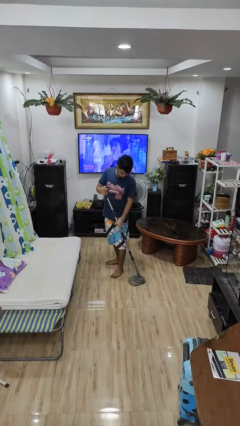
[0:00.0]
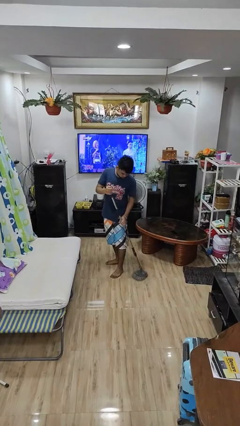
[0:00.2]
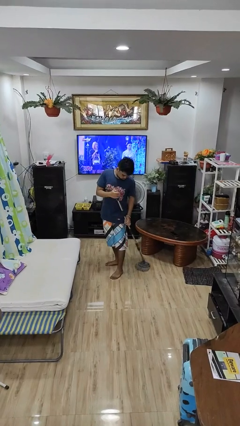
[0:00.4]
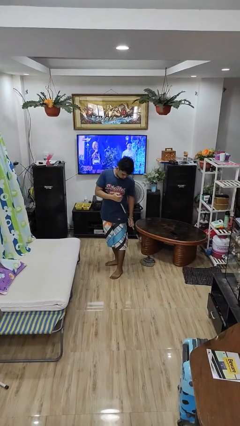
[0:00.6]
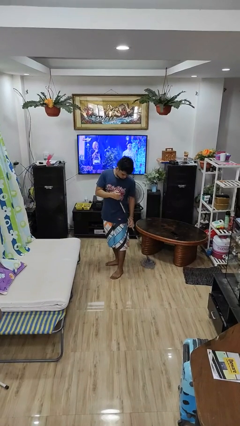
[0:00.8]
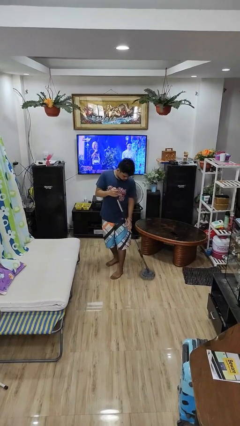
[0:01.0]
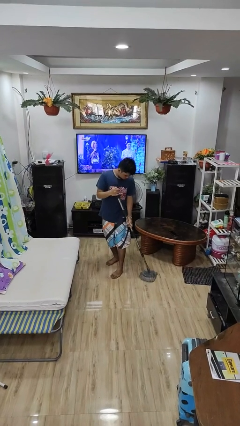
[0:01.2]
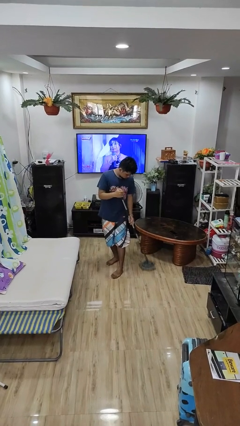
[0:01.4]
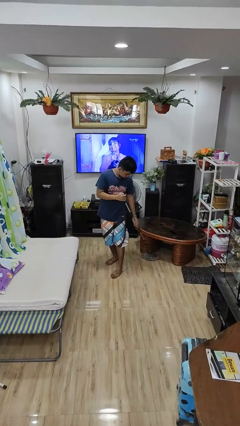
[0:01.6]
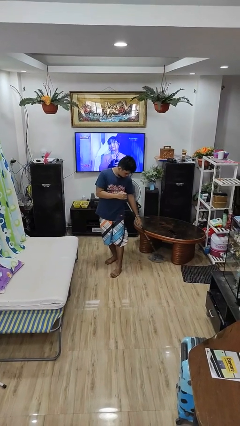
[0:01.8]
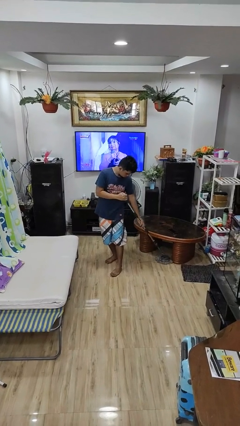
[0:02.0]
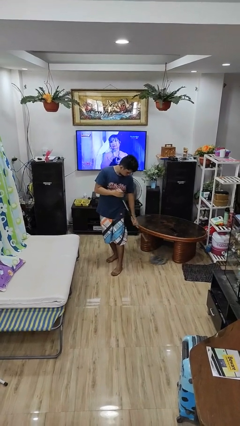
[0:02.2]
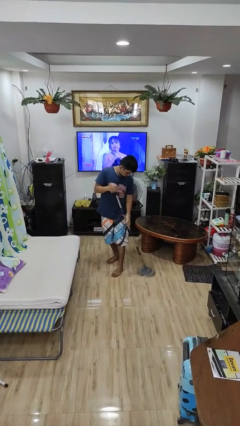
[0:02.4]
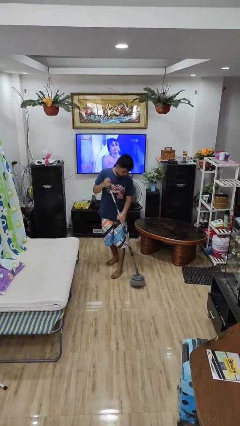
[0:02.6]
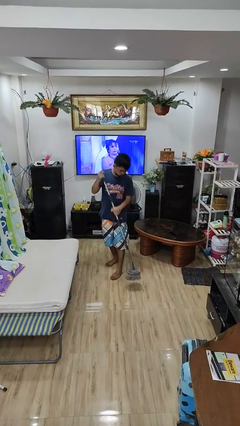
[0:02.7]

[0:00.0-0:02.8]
person mops

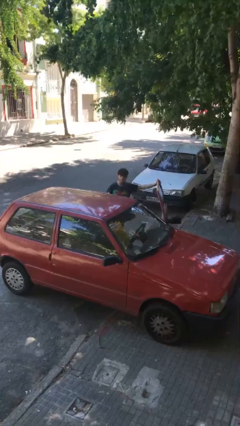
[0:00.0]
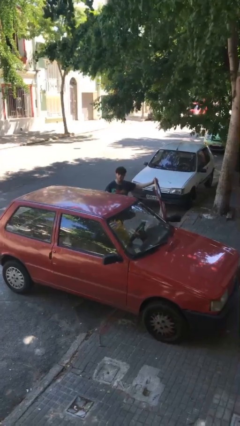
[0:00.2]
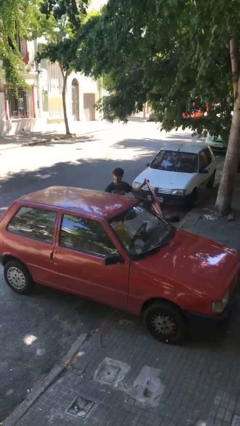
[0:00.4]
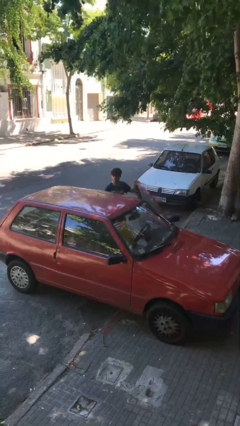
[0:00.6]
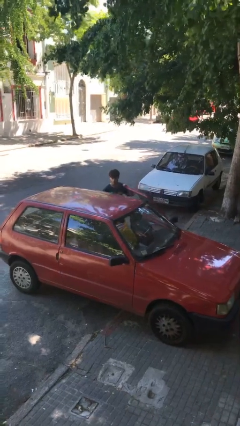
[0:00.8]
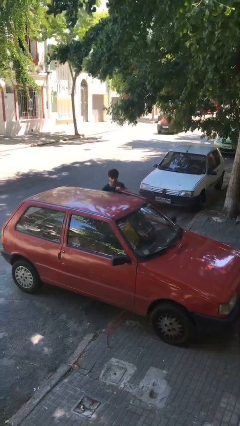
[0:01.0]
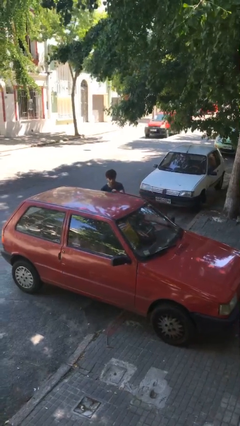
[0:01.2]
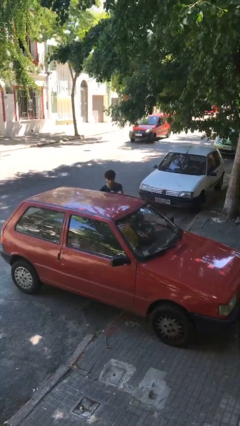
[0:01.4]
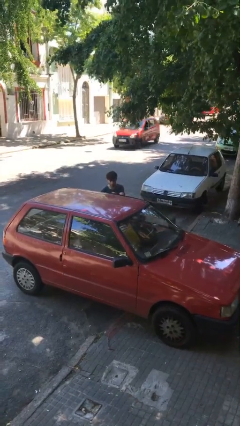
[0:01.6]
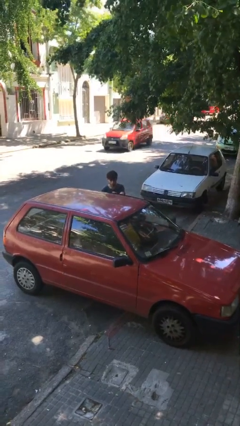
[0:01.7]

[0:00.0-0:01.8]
person closes car door

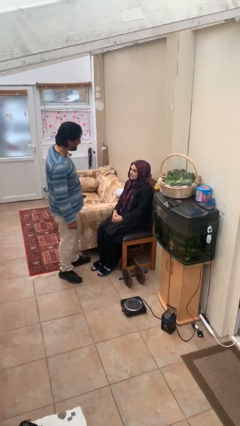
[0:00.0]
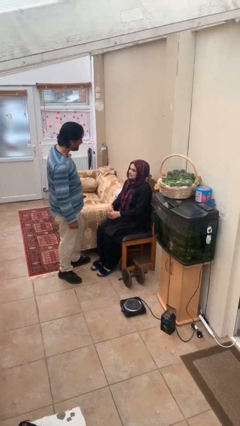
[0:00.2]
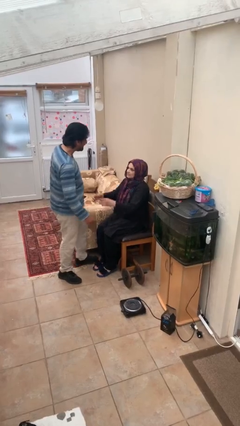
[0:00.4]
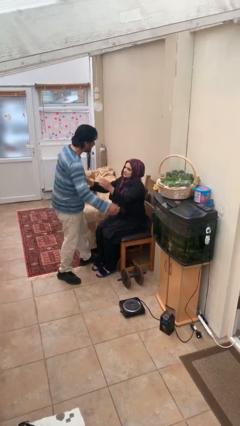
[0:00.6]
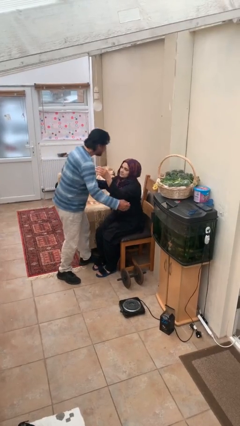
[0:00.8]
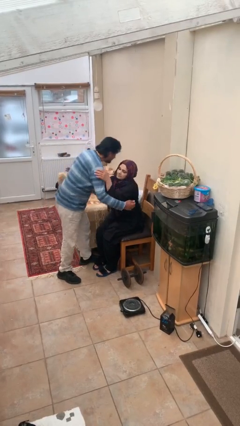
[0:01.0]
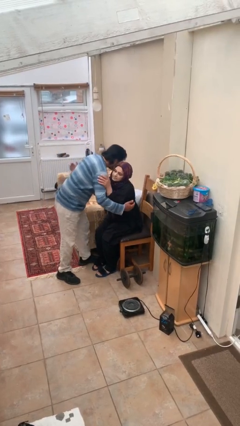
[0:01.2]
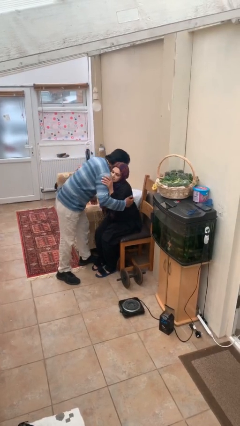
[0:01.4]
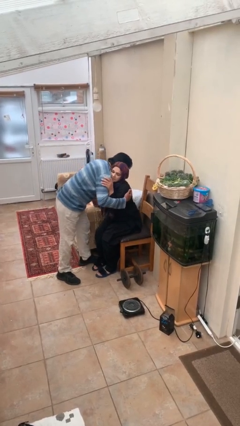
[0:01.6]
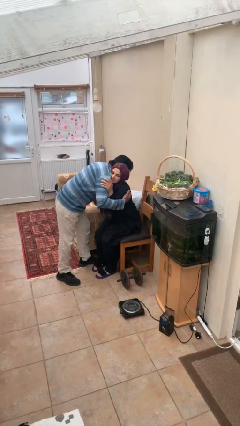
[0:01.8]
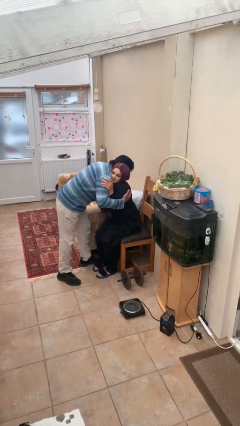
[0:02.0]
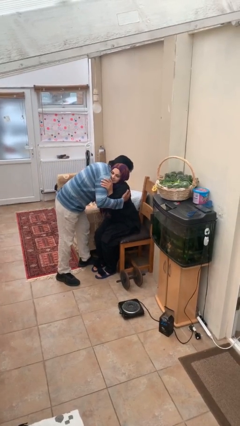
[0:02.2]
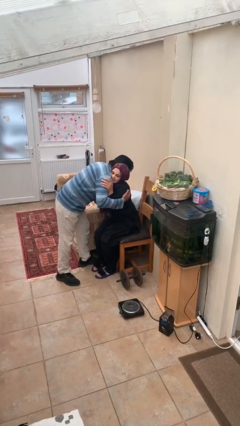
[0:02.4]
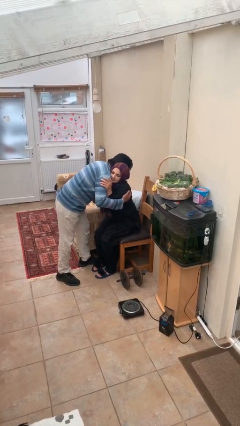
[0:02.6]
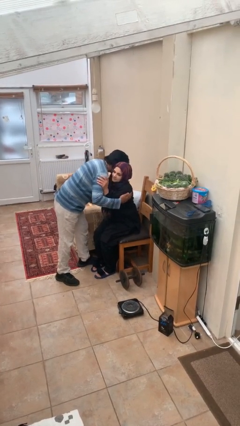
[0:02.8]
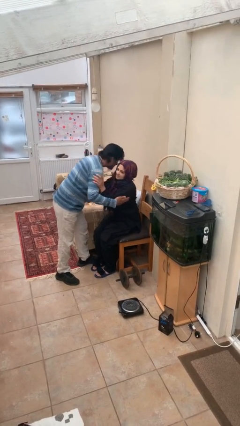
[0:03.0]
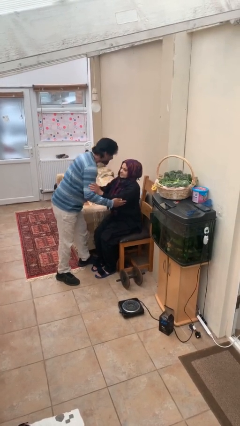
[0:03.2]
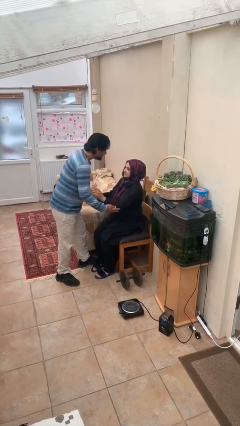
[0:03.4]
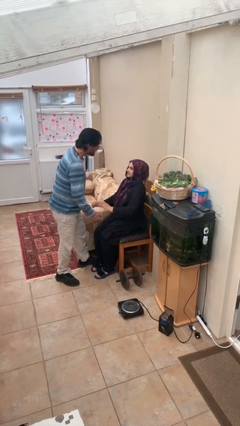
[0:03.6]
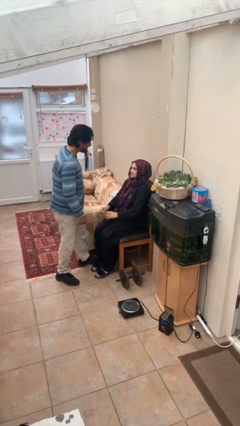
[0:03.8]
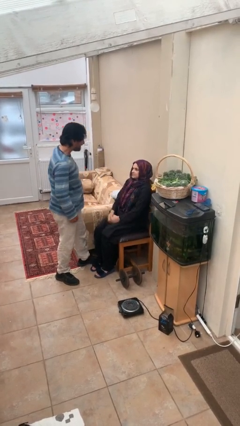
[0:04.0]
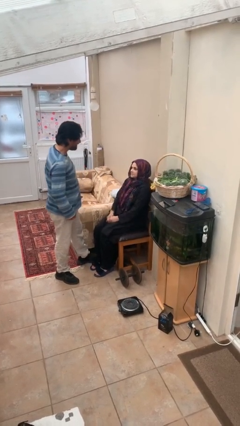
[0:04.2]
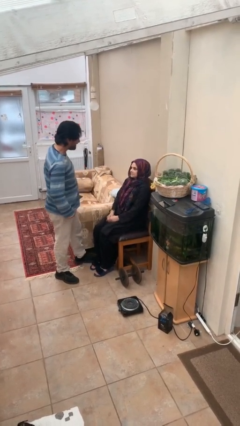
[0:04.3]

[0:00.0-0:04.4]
person embraces person

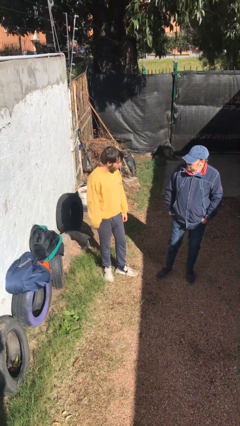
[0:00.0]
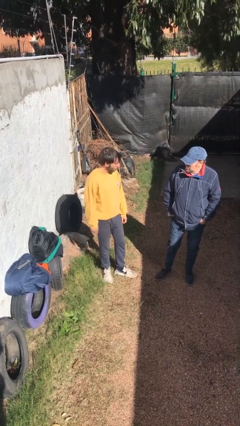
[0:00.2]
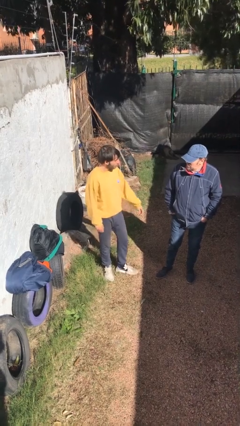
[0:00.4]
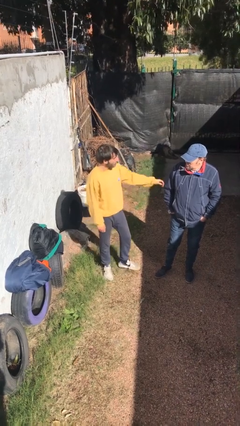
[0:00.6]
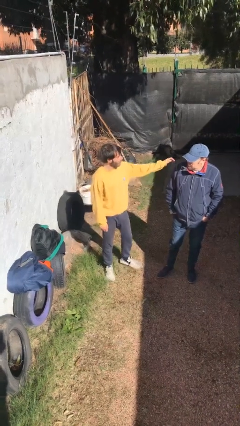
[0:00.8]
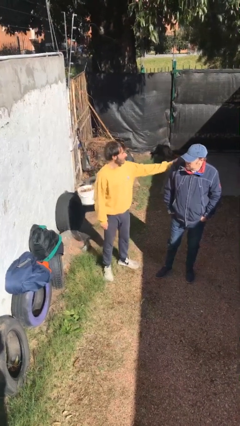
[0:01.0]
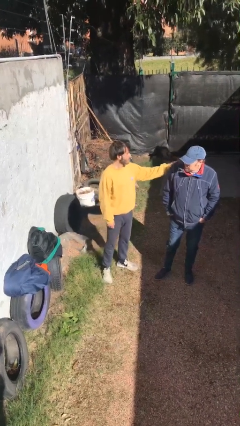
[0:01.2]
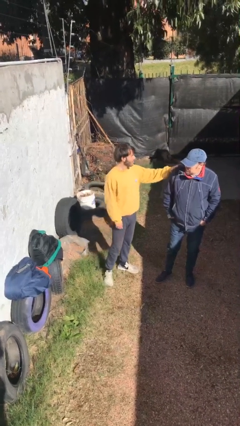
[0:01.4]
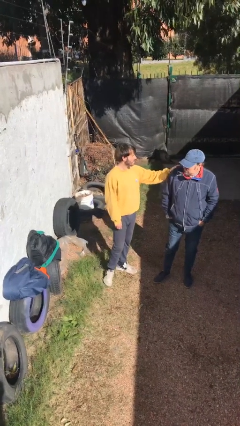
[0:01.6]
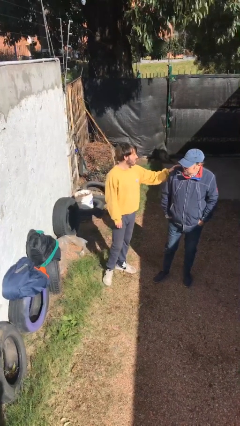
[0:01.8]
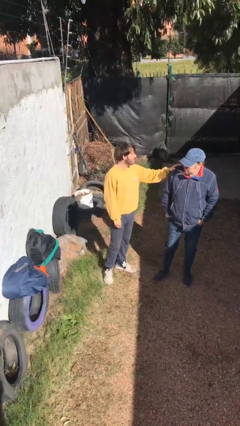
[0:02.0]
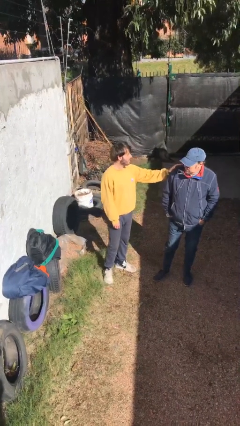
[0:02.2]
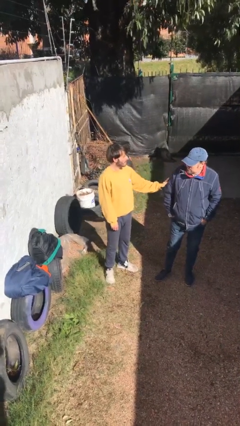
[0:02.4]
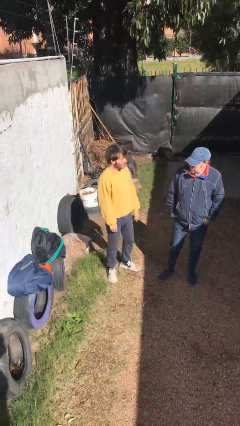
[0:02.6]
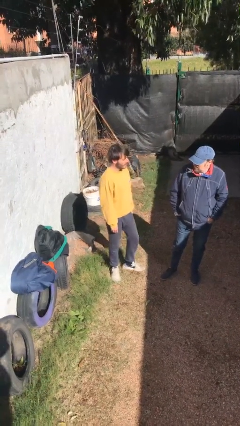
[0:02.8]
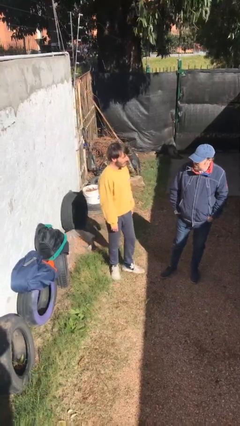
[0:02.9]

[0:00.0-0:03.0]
person pounds shoulders of person

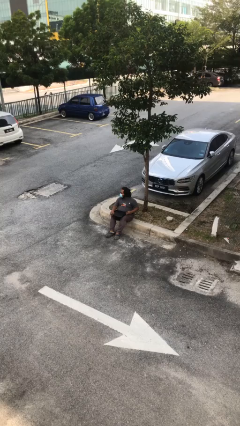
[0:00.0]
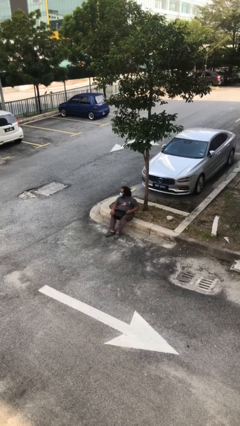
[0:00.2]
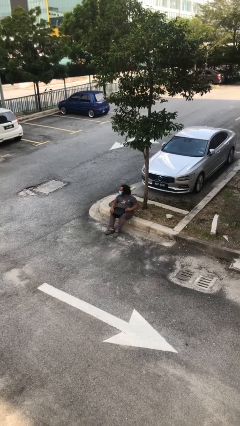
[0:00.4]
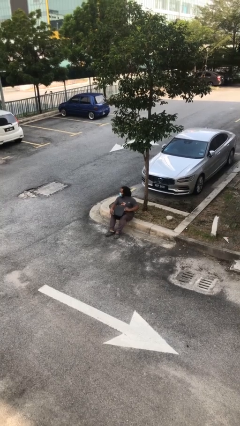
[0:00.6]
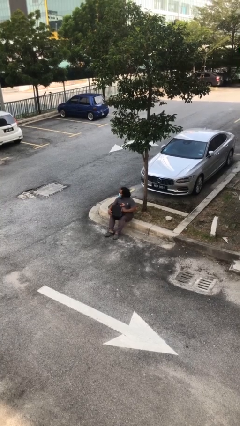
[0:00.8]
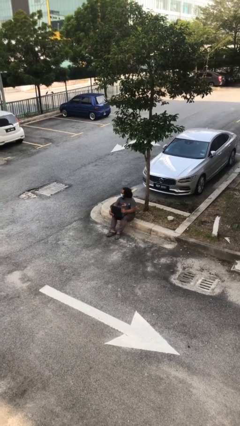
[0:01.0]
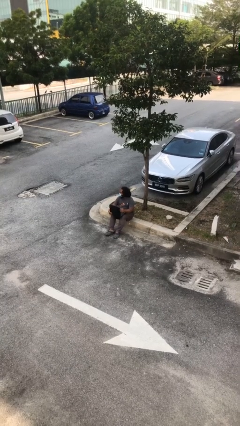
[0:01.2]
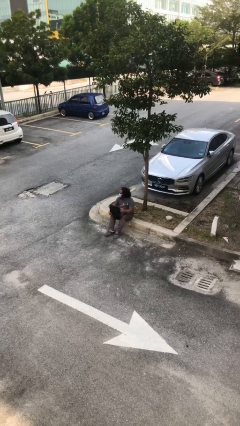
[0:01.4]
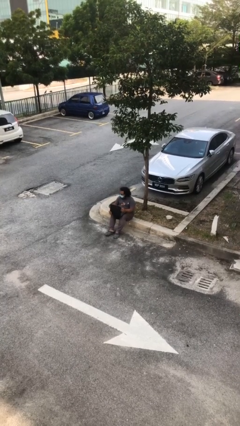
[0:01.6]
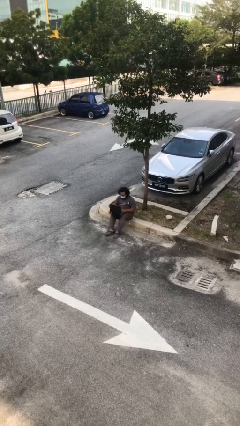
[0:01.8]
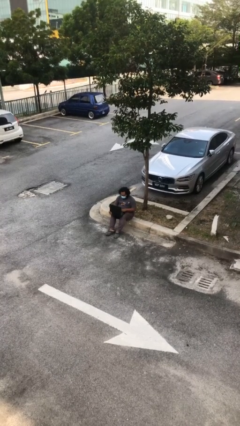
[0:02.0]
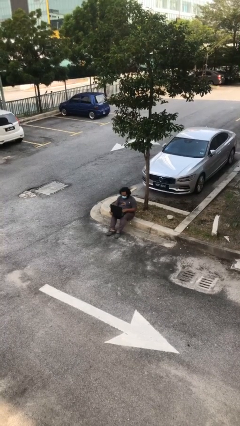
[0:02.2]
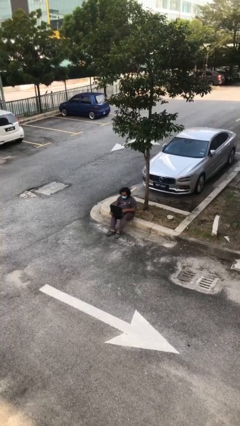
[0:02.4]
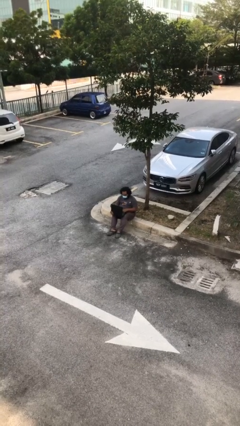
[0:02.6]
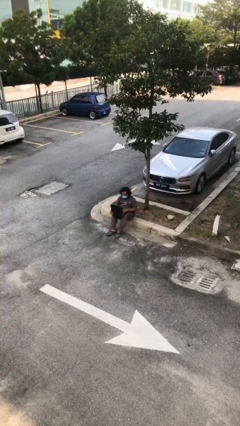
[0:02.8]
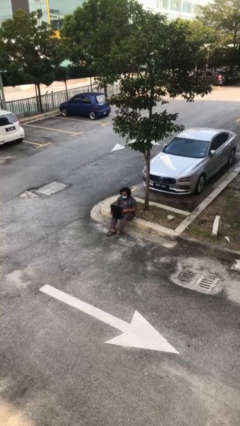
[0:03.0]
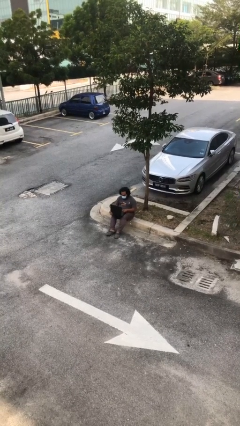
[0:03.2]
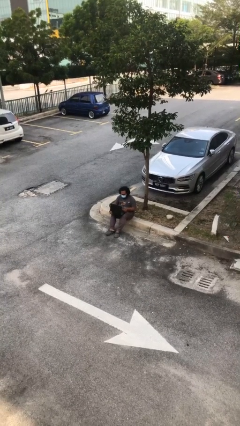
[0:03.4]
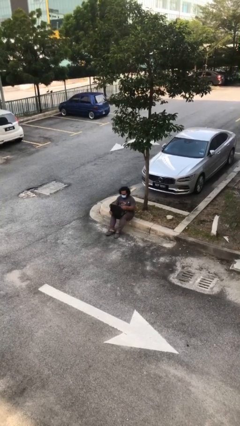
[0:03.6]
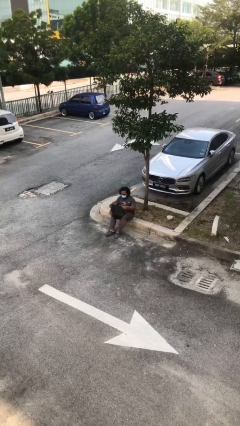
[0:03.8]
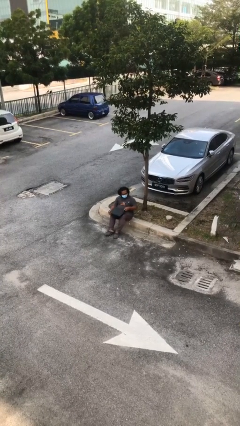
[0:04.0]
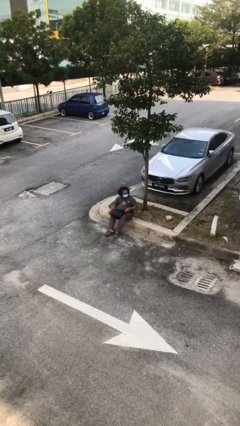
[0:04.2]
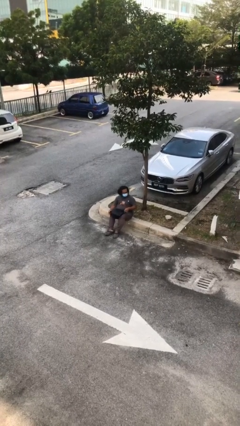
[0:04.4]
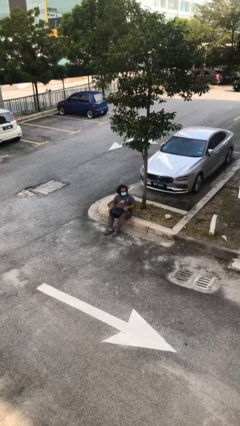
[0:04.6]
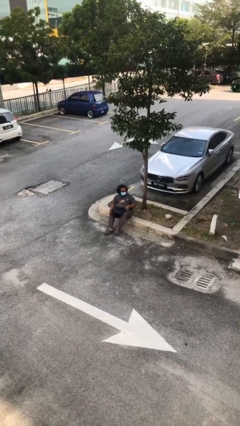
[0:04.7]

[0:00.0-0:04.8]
person interacts with laptop

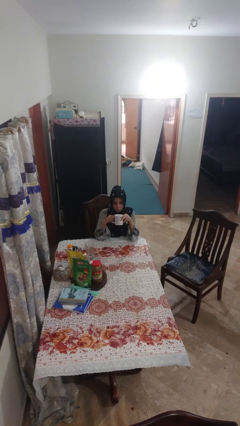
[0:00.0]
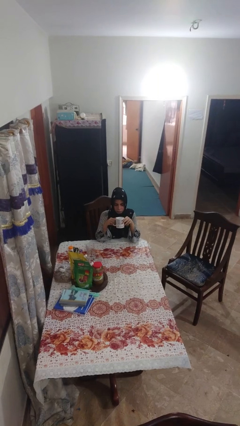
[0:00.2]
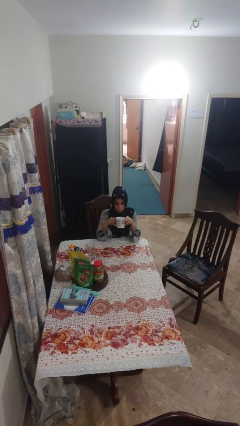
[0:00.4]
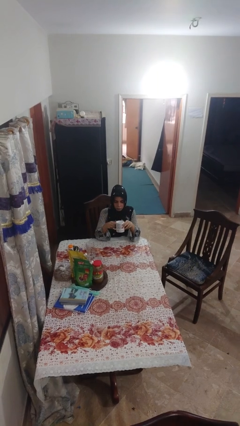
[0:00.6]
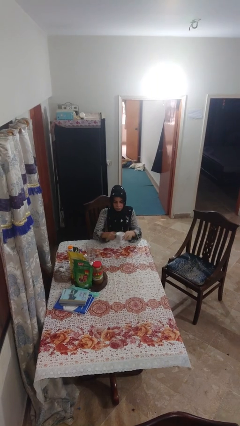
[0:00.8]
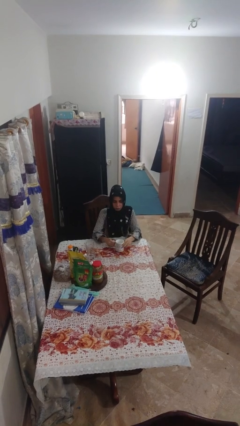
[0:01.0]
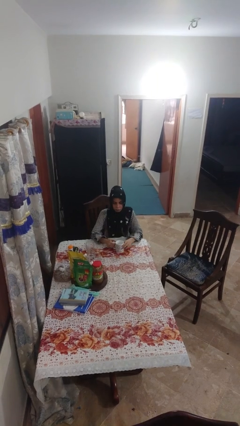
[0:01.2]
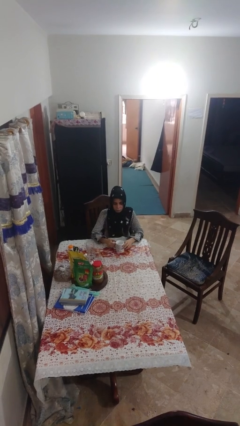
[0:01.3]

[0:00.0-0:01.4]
person puts down object on table
